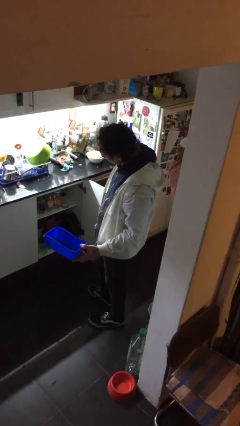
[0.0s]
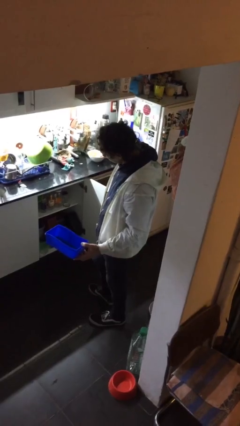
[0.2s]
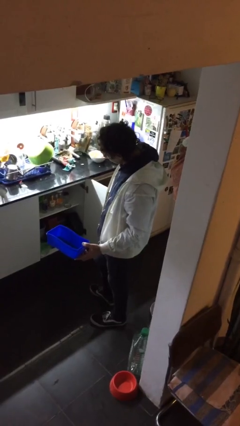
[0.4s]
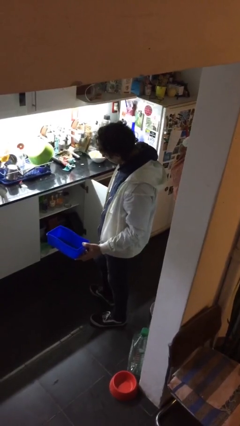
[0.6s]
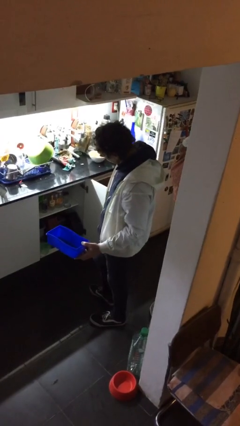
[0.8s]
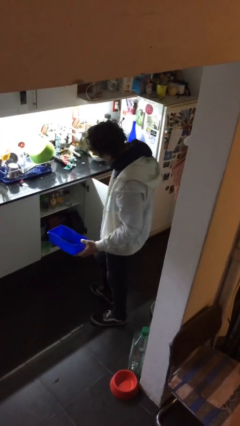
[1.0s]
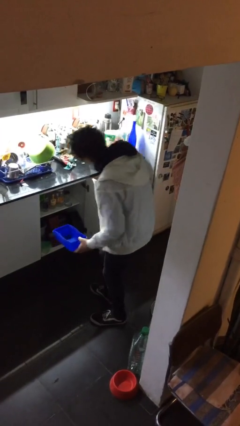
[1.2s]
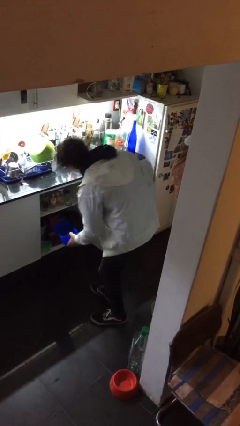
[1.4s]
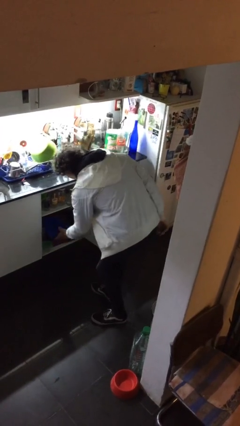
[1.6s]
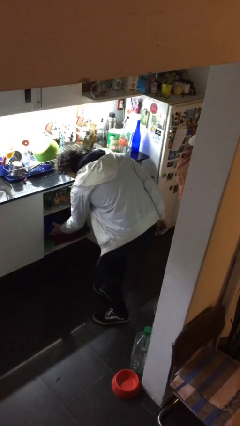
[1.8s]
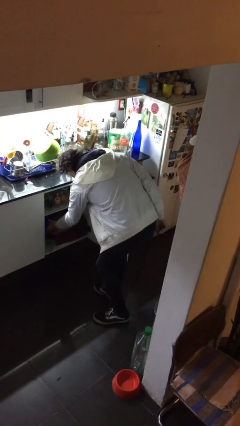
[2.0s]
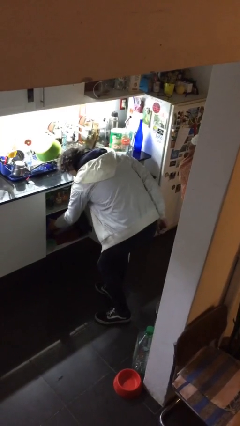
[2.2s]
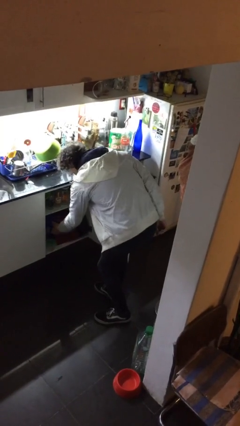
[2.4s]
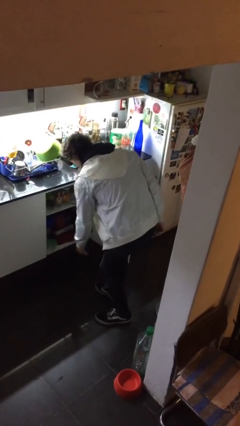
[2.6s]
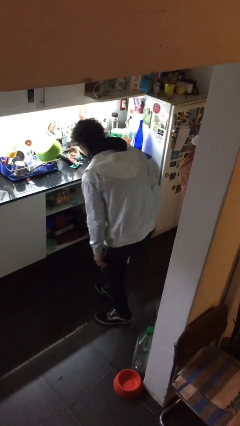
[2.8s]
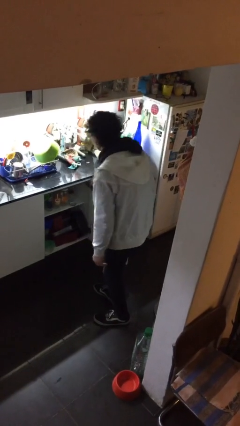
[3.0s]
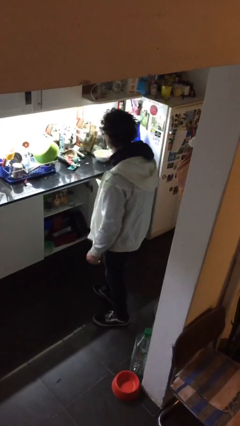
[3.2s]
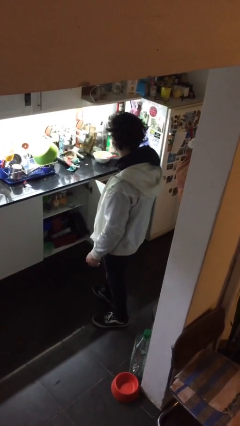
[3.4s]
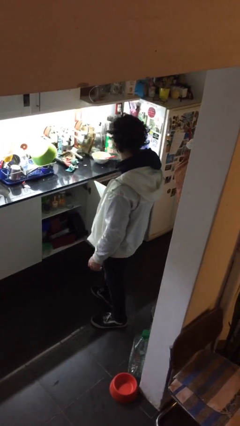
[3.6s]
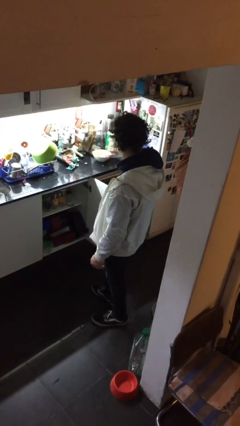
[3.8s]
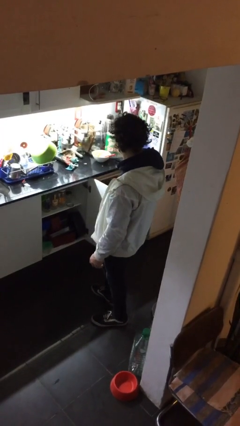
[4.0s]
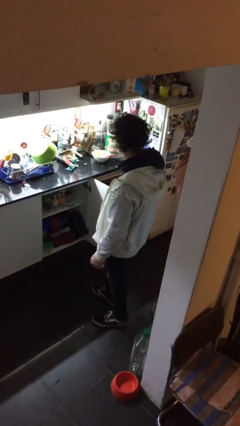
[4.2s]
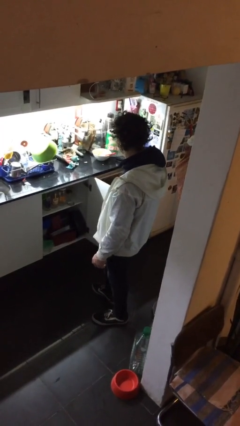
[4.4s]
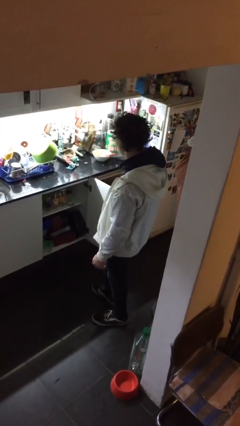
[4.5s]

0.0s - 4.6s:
person puts down object into cabinet

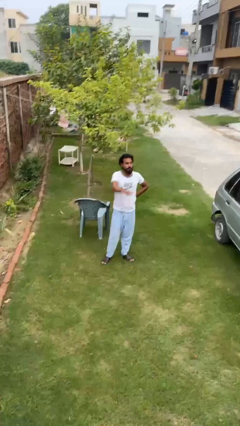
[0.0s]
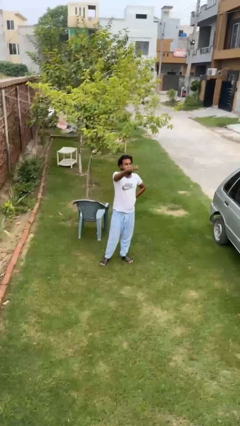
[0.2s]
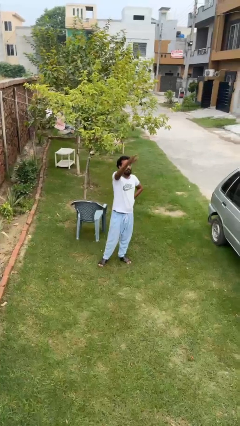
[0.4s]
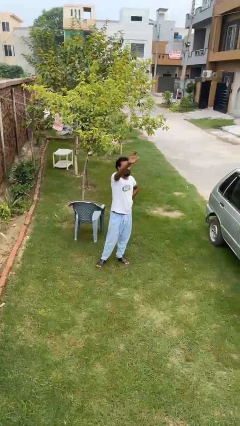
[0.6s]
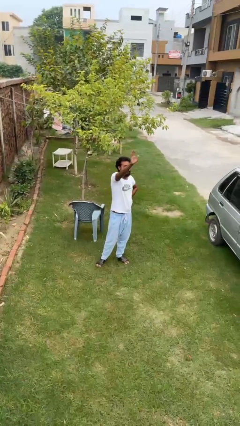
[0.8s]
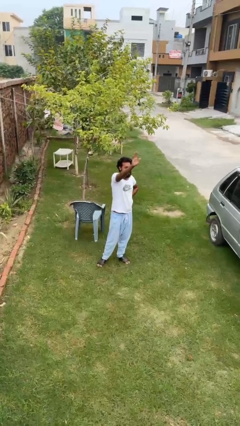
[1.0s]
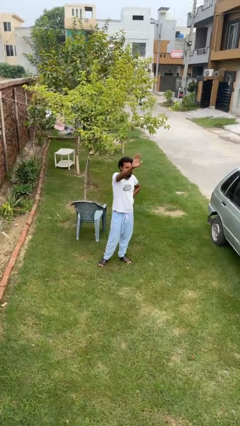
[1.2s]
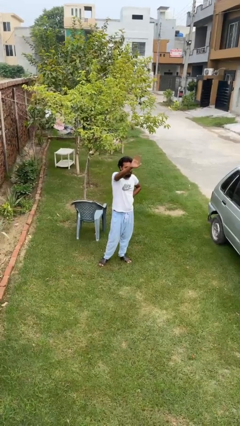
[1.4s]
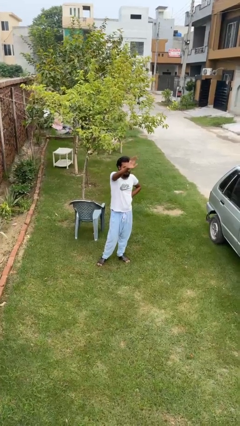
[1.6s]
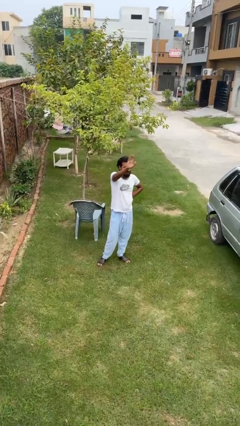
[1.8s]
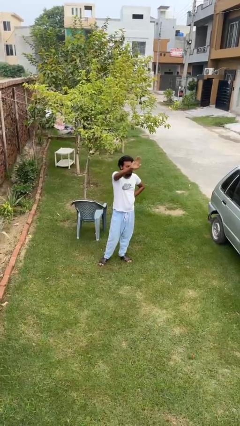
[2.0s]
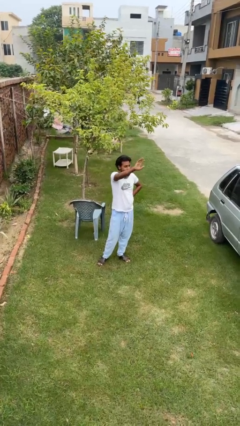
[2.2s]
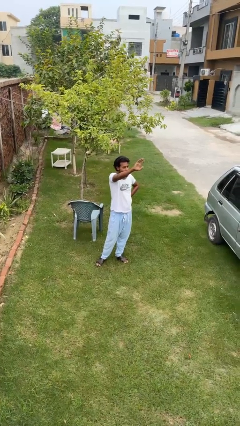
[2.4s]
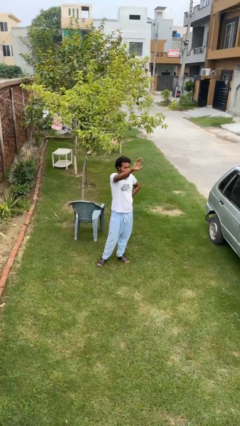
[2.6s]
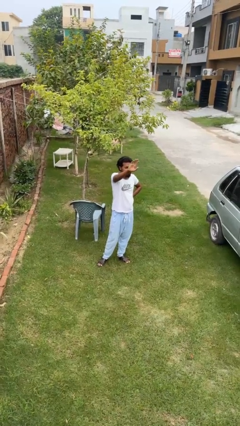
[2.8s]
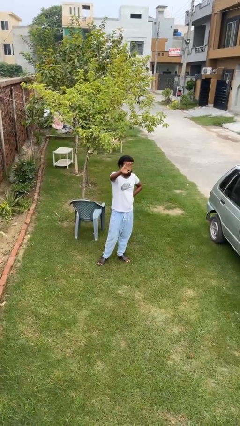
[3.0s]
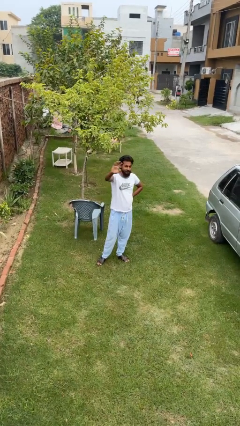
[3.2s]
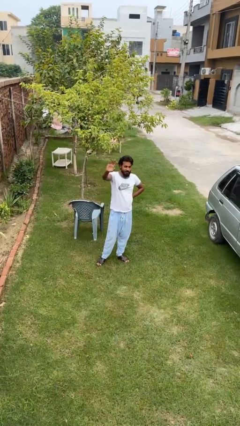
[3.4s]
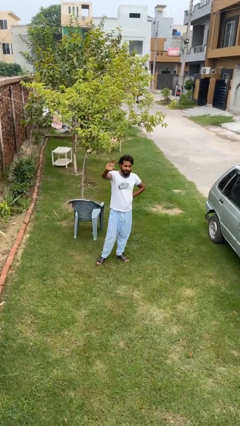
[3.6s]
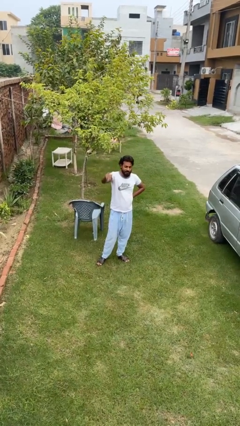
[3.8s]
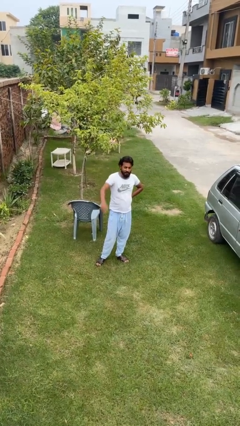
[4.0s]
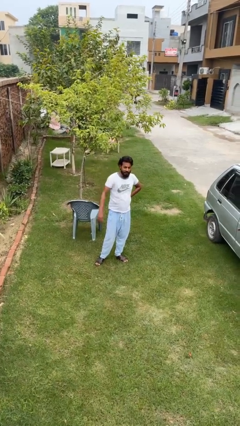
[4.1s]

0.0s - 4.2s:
person waves at person

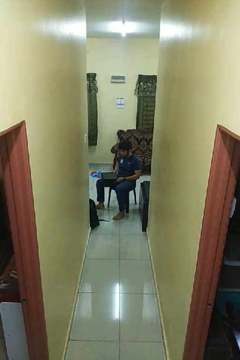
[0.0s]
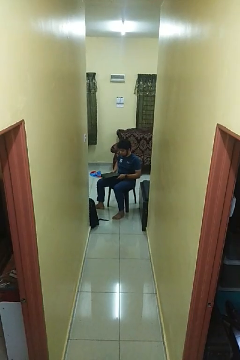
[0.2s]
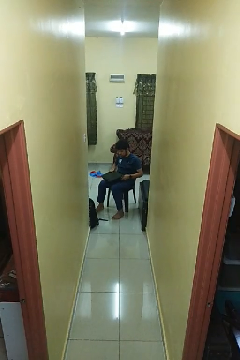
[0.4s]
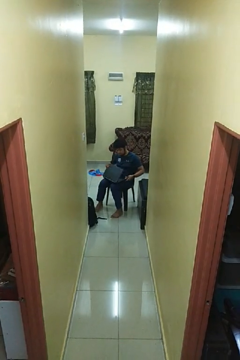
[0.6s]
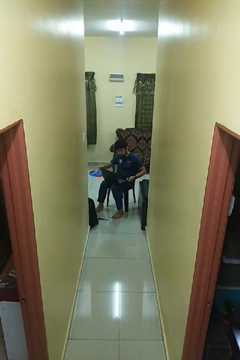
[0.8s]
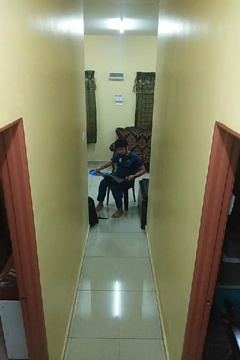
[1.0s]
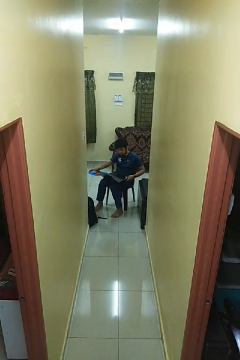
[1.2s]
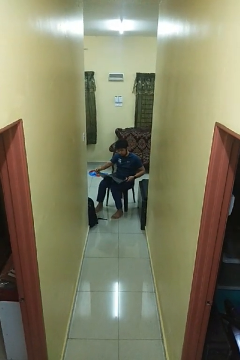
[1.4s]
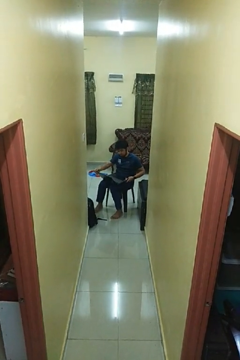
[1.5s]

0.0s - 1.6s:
person opens laptop

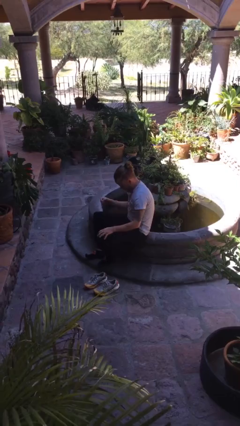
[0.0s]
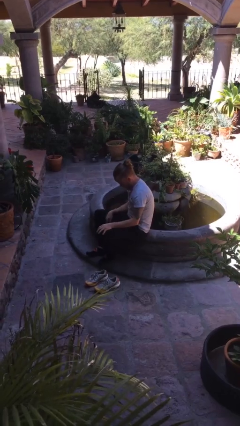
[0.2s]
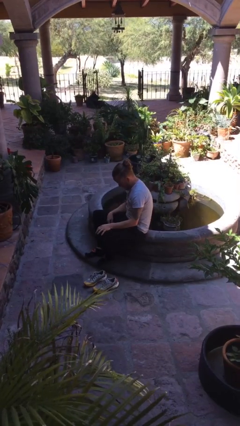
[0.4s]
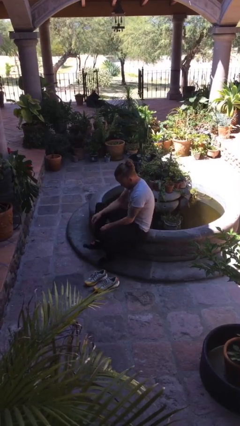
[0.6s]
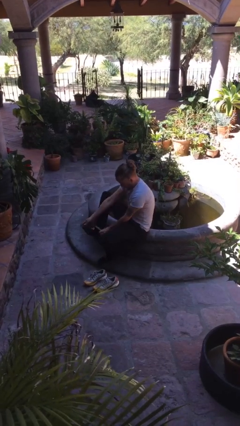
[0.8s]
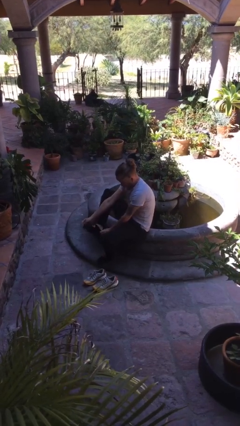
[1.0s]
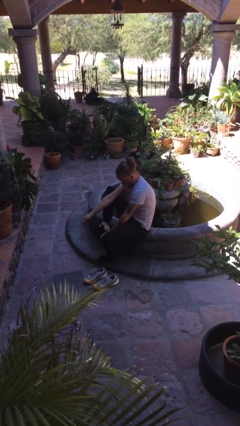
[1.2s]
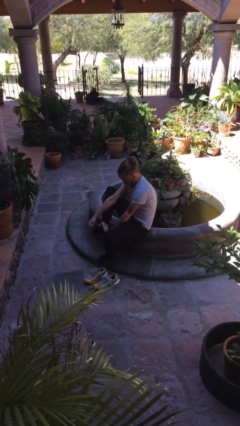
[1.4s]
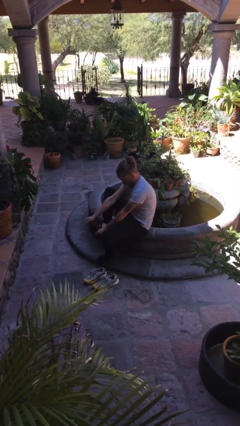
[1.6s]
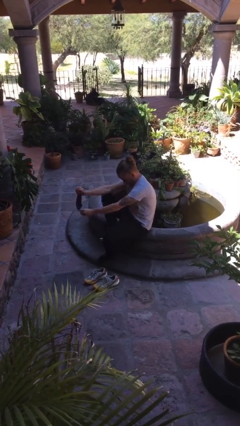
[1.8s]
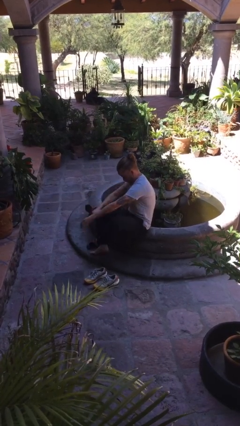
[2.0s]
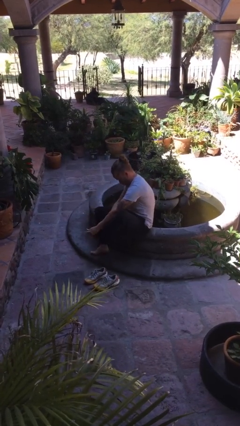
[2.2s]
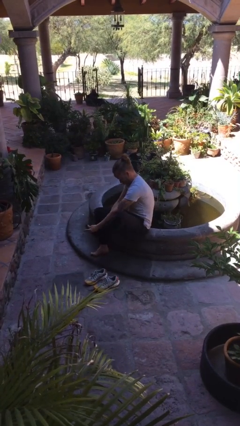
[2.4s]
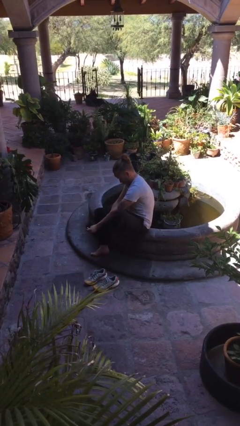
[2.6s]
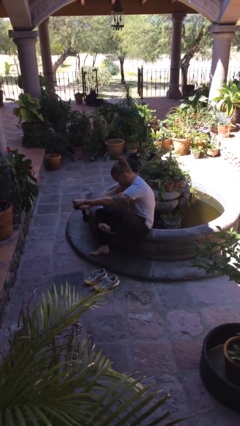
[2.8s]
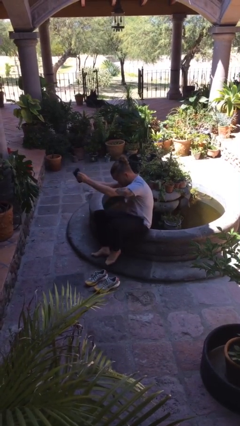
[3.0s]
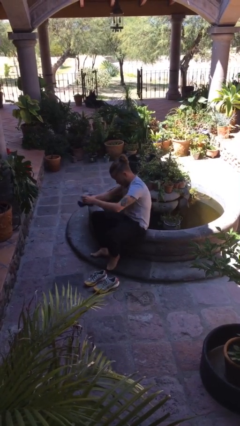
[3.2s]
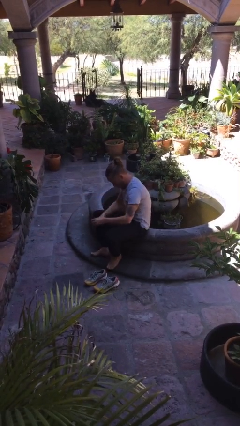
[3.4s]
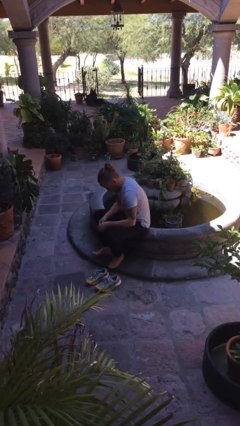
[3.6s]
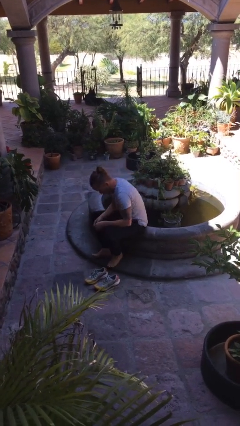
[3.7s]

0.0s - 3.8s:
person takes off socks

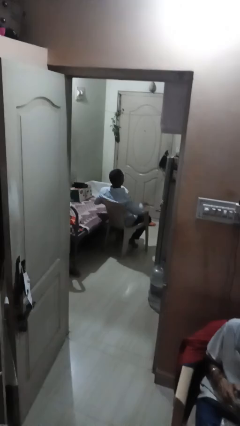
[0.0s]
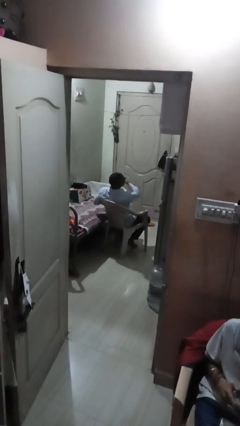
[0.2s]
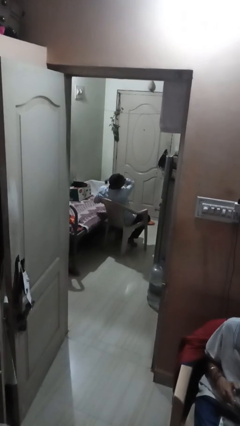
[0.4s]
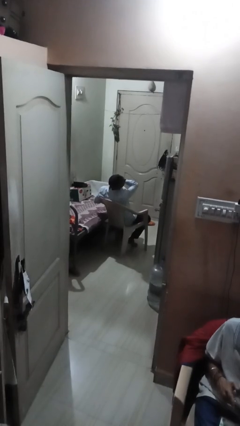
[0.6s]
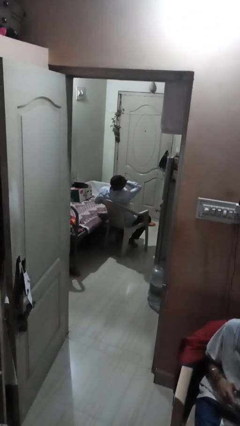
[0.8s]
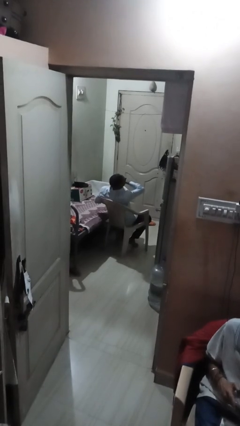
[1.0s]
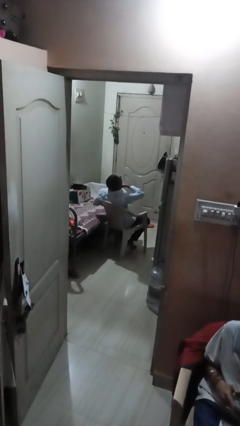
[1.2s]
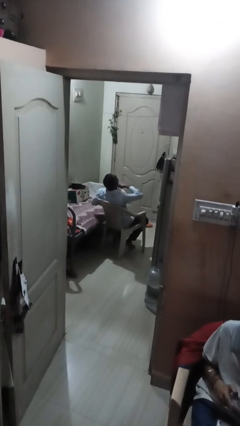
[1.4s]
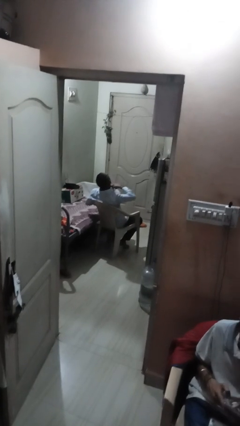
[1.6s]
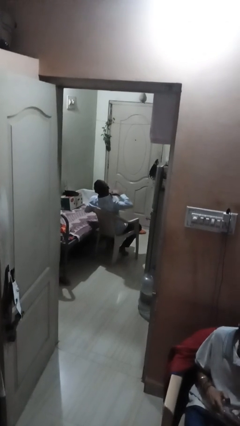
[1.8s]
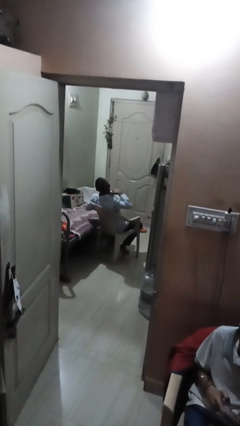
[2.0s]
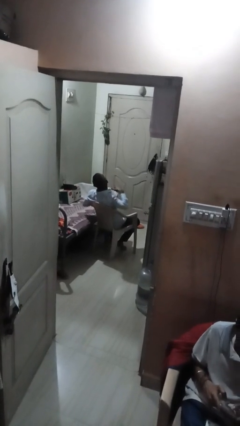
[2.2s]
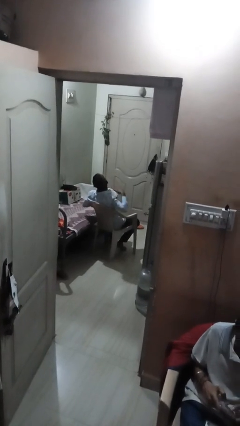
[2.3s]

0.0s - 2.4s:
person gestures cut

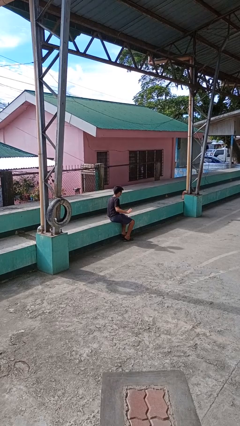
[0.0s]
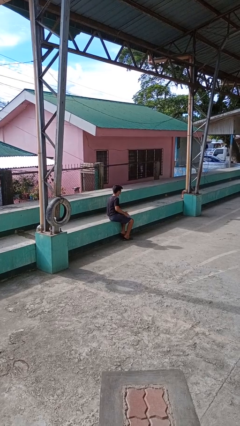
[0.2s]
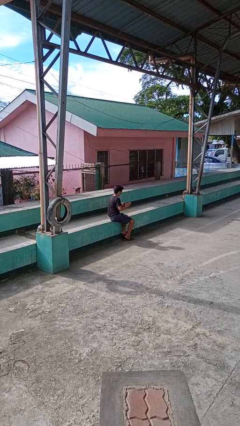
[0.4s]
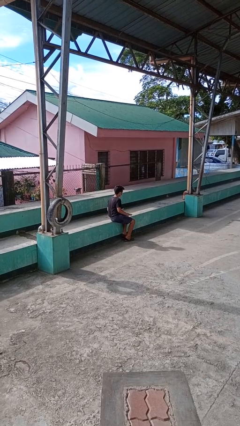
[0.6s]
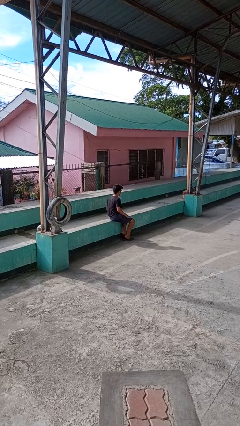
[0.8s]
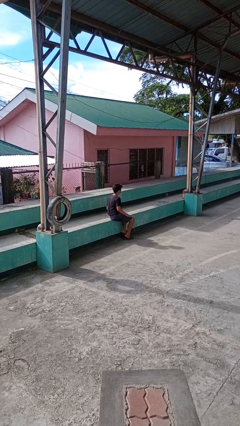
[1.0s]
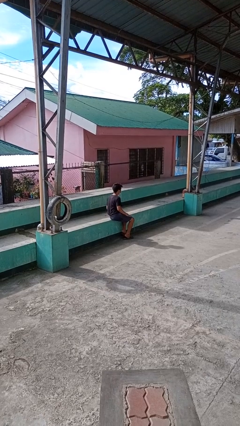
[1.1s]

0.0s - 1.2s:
person slaps hands on thighs
